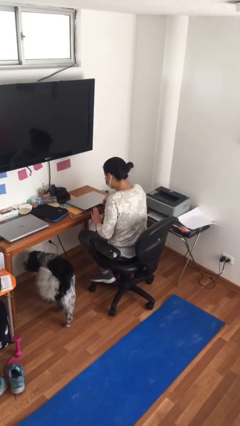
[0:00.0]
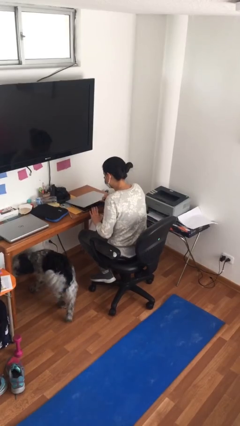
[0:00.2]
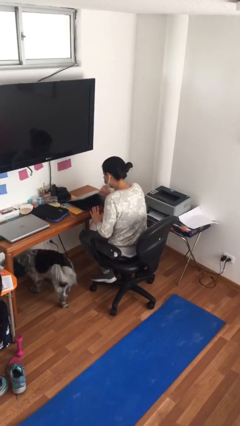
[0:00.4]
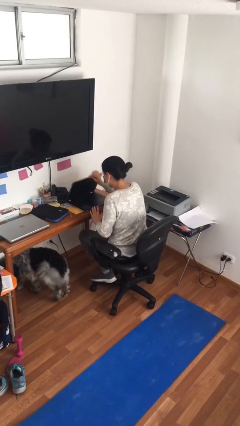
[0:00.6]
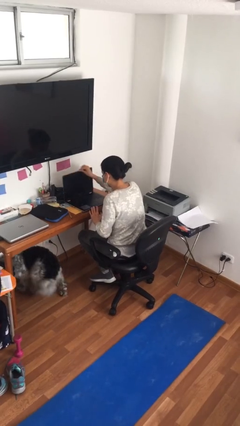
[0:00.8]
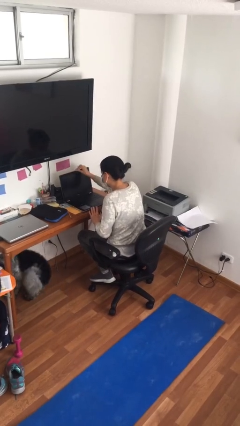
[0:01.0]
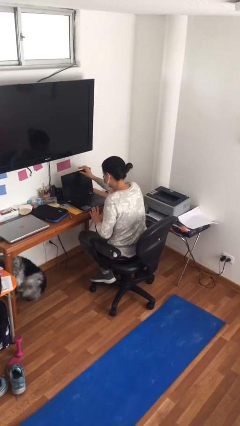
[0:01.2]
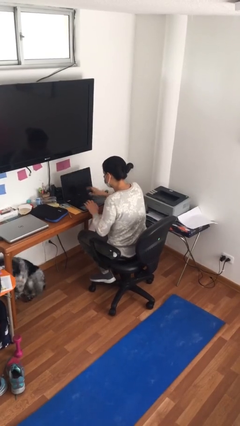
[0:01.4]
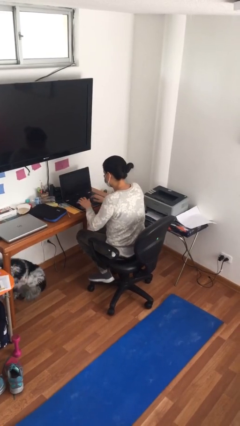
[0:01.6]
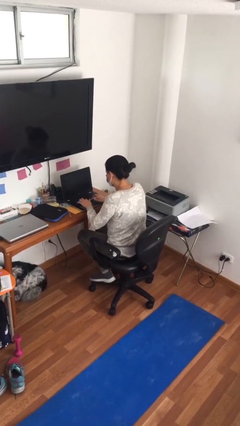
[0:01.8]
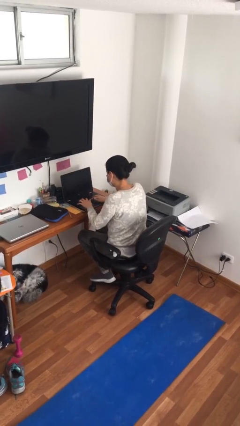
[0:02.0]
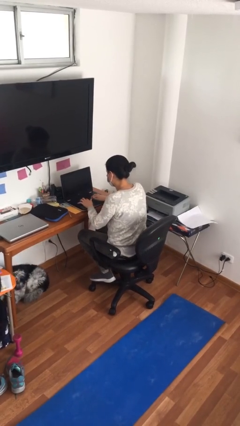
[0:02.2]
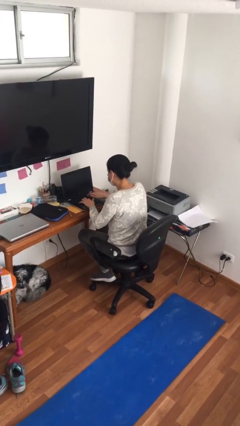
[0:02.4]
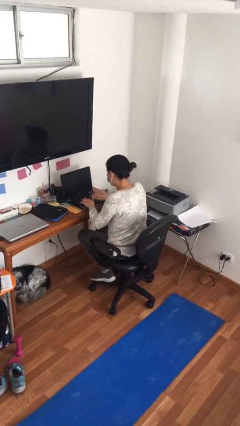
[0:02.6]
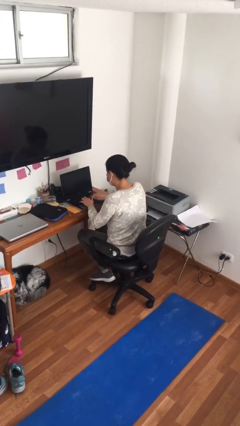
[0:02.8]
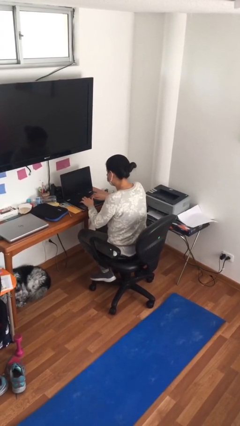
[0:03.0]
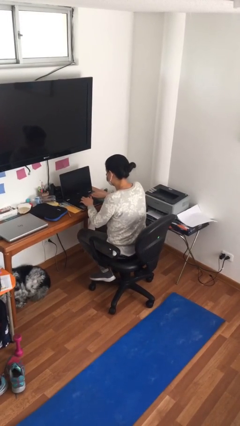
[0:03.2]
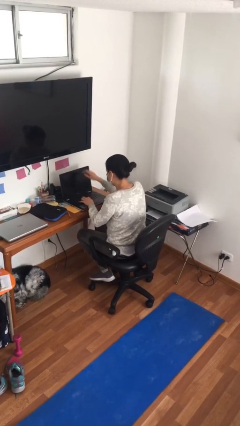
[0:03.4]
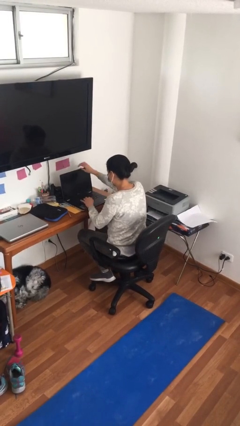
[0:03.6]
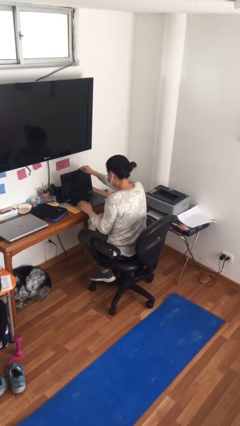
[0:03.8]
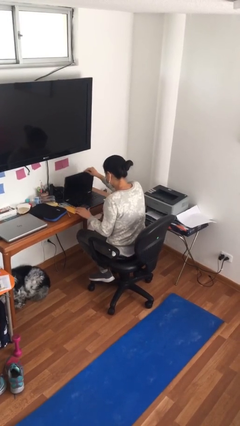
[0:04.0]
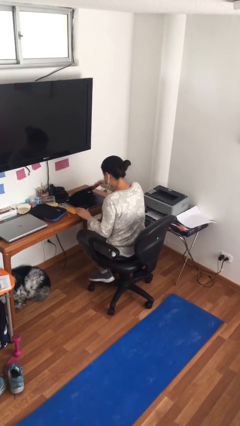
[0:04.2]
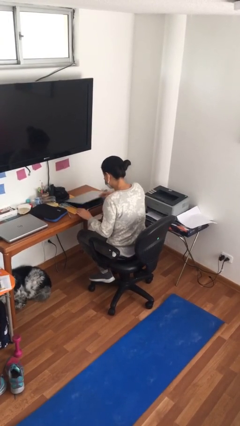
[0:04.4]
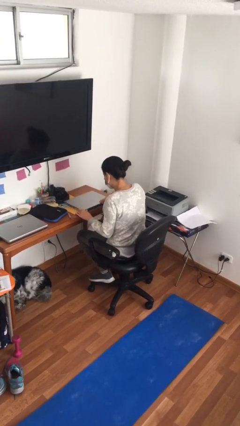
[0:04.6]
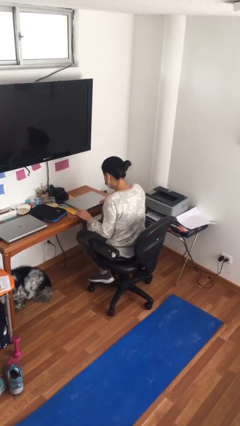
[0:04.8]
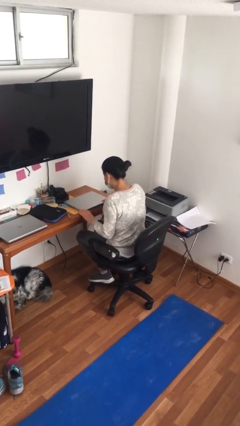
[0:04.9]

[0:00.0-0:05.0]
person interacts with laptop

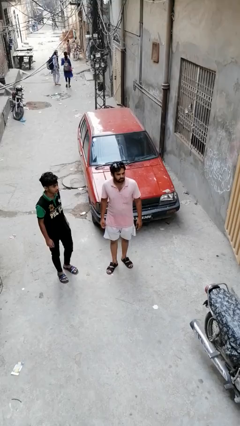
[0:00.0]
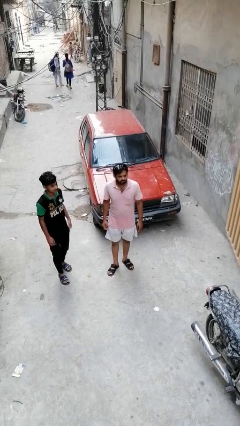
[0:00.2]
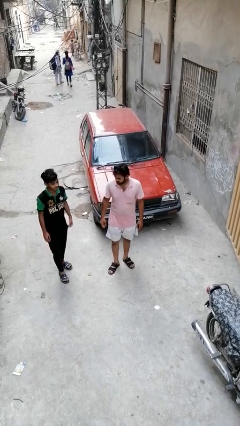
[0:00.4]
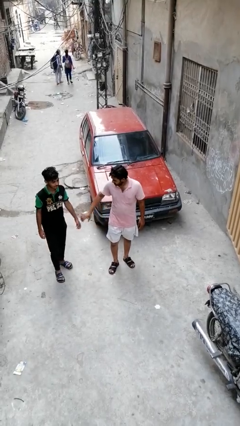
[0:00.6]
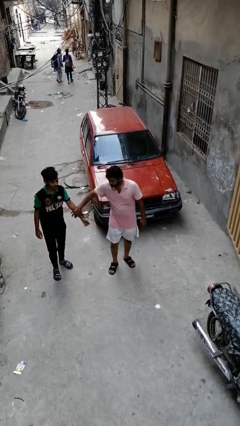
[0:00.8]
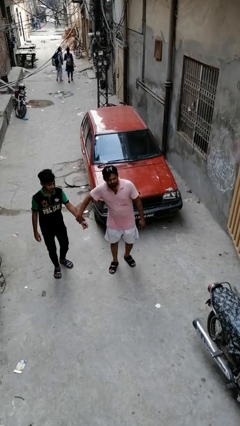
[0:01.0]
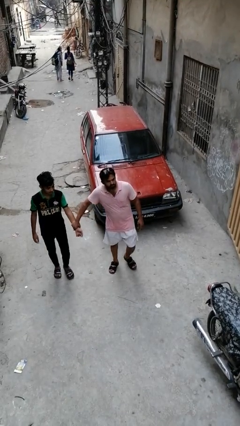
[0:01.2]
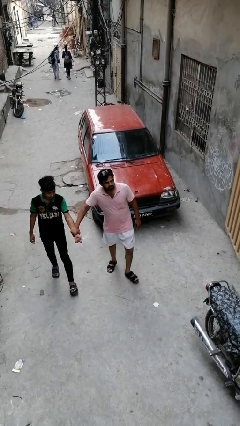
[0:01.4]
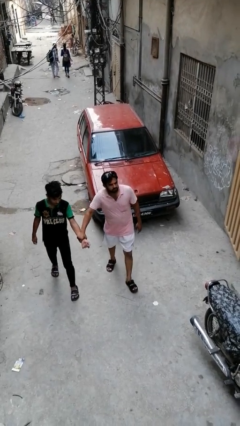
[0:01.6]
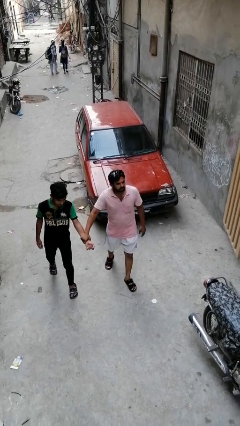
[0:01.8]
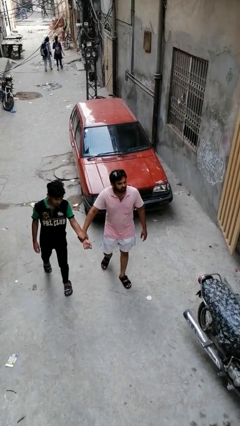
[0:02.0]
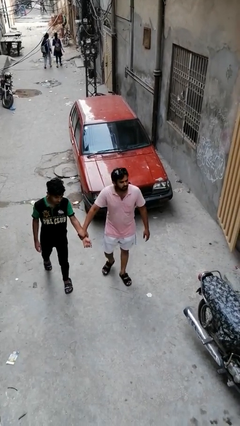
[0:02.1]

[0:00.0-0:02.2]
person grabs person by forearm

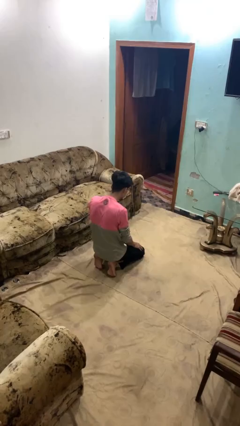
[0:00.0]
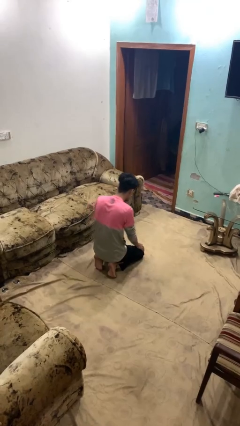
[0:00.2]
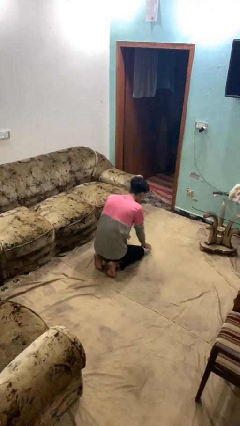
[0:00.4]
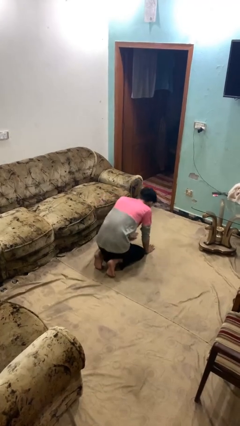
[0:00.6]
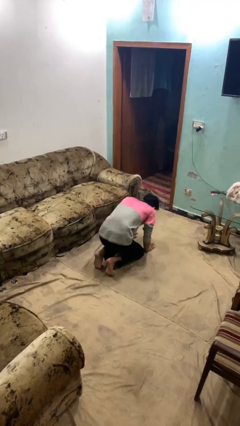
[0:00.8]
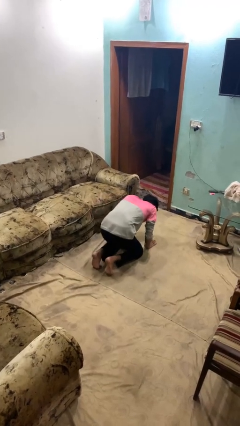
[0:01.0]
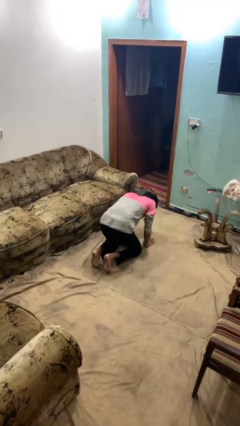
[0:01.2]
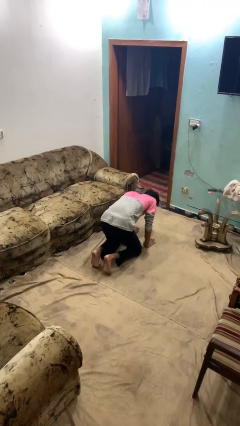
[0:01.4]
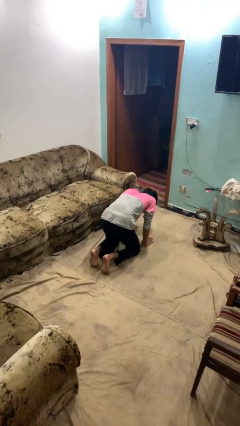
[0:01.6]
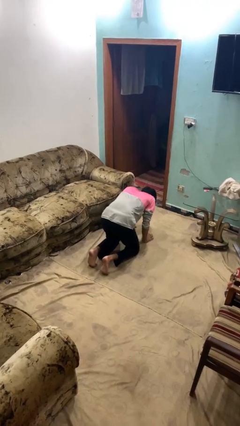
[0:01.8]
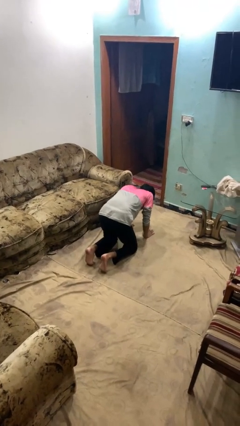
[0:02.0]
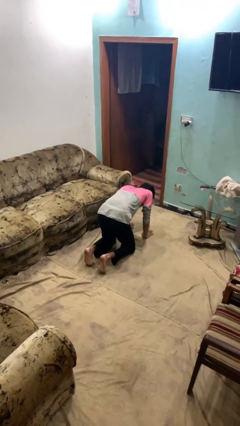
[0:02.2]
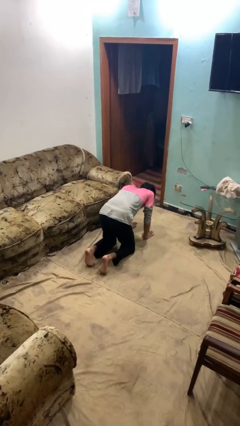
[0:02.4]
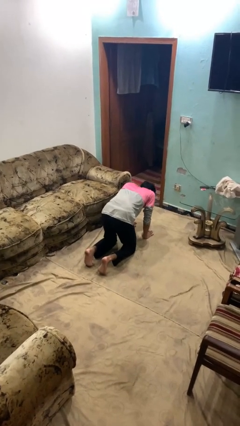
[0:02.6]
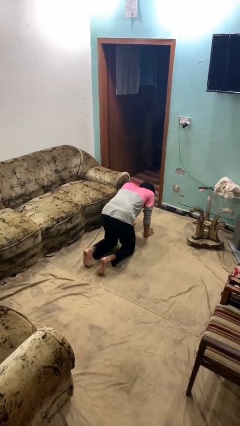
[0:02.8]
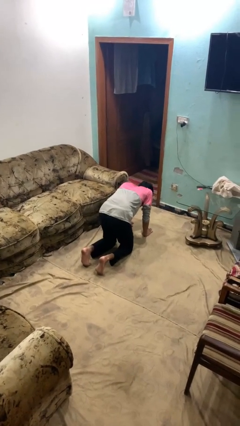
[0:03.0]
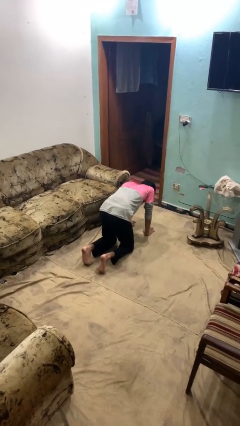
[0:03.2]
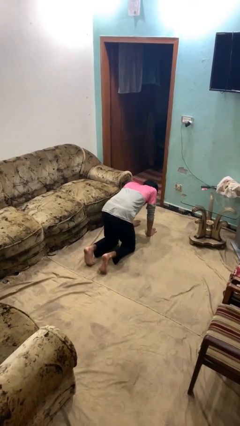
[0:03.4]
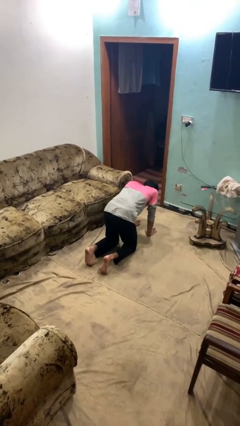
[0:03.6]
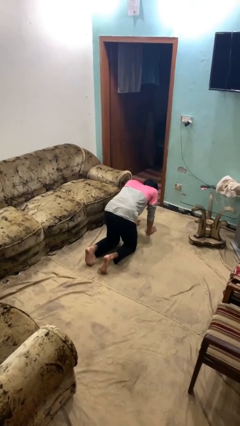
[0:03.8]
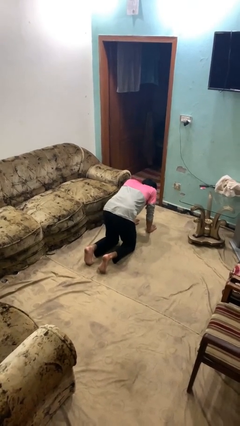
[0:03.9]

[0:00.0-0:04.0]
person crawls

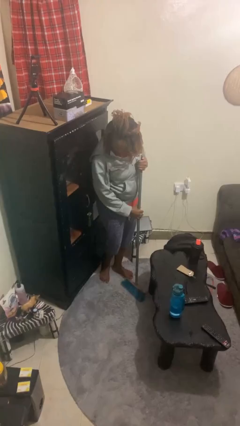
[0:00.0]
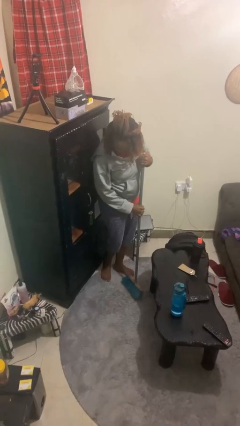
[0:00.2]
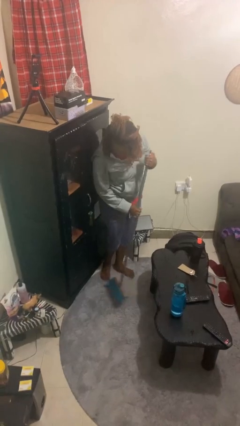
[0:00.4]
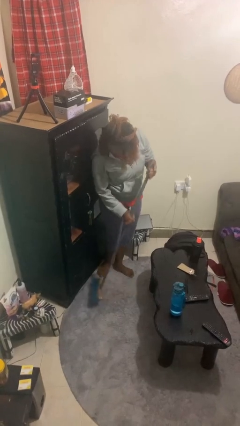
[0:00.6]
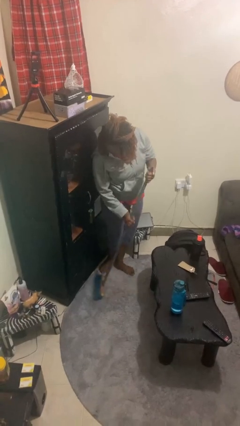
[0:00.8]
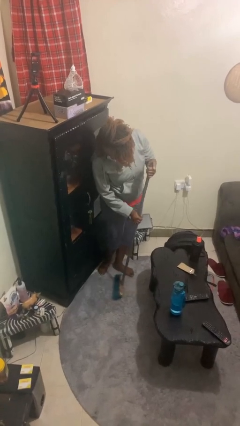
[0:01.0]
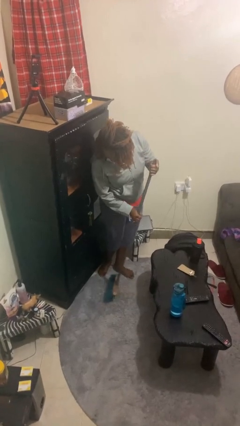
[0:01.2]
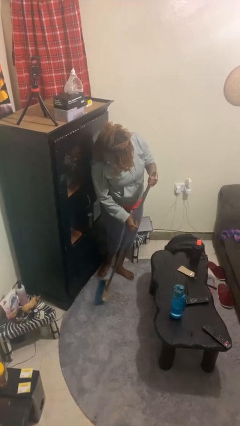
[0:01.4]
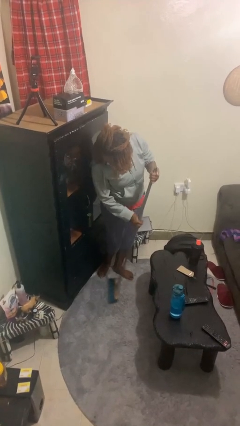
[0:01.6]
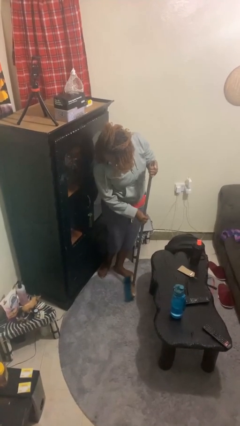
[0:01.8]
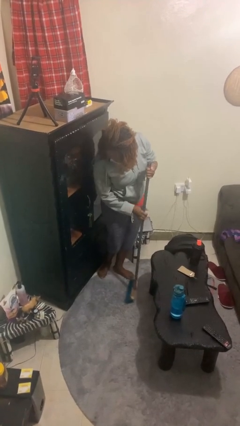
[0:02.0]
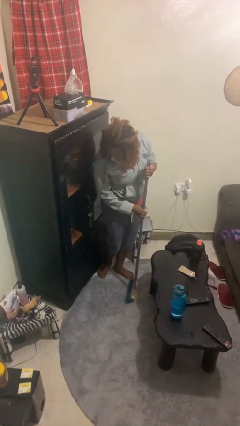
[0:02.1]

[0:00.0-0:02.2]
person sweeps floor

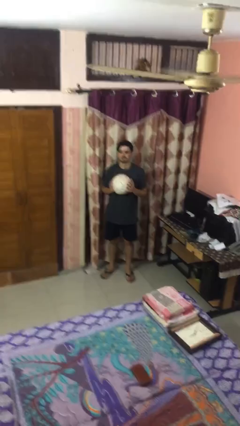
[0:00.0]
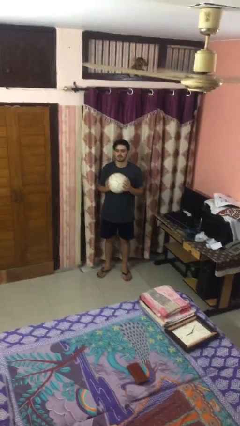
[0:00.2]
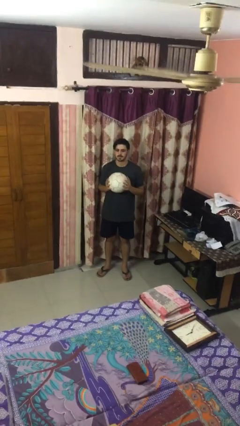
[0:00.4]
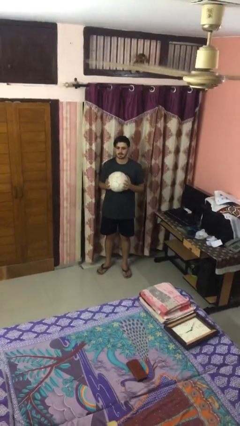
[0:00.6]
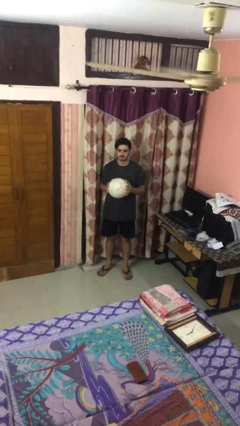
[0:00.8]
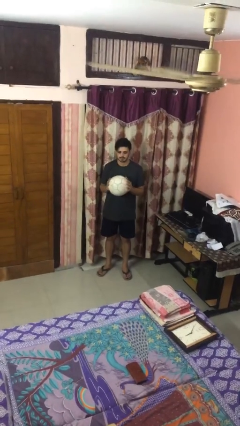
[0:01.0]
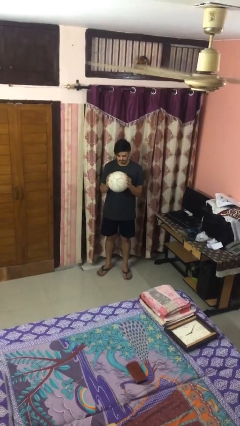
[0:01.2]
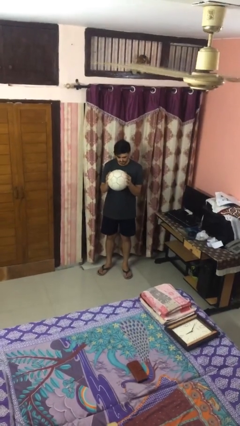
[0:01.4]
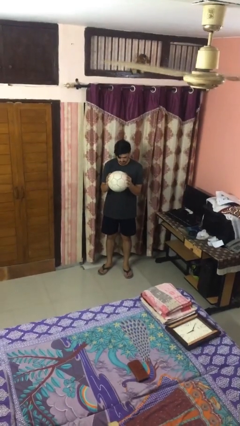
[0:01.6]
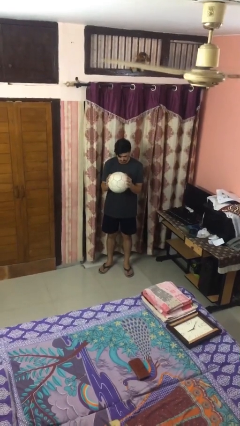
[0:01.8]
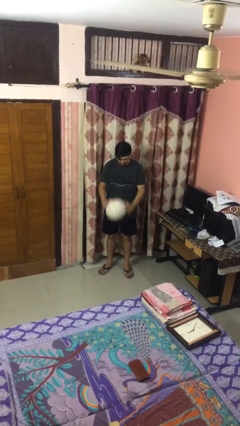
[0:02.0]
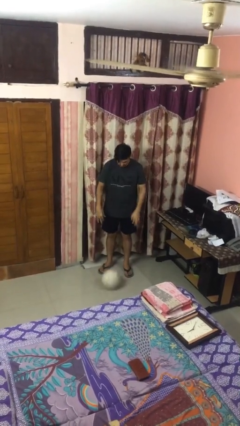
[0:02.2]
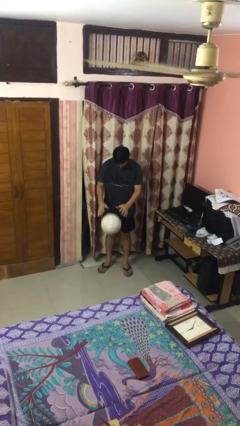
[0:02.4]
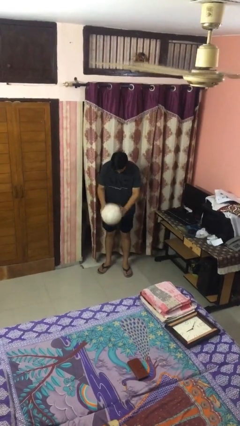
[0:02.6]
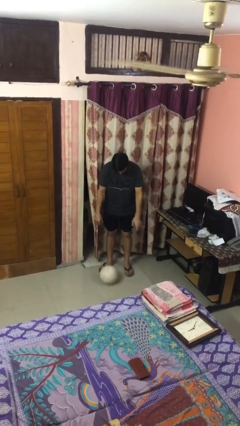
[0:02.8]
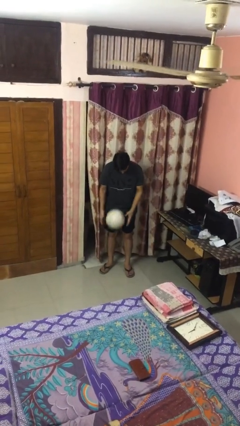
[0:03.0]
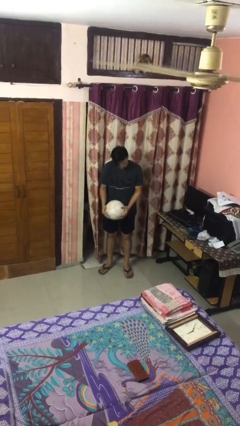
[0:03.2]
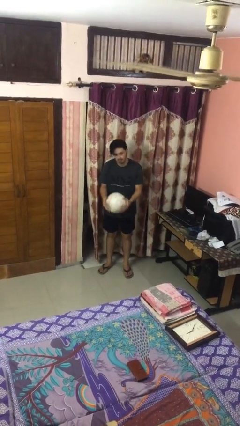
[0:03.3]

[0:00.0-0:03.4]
person bounces ball on floor

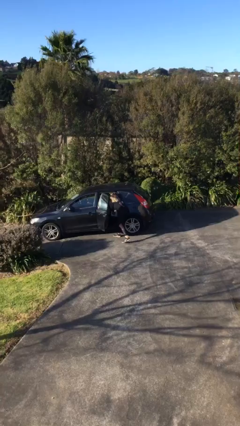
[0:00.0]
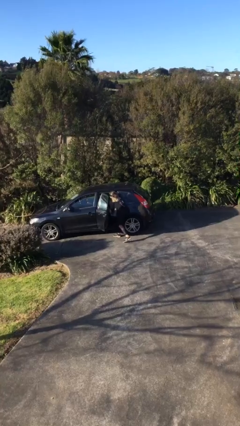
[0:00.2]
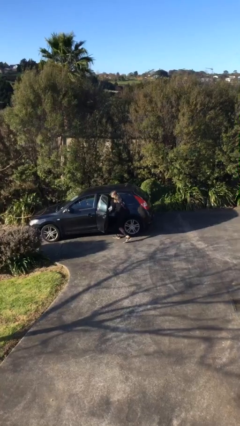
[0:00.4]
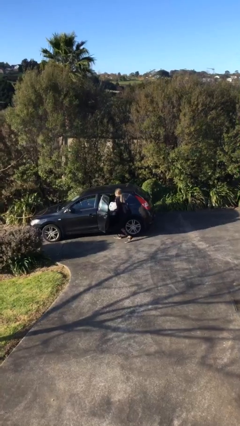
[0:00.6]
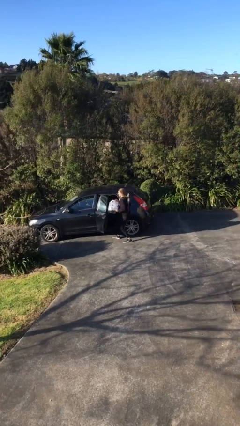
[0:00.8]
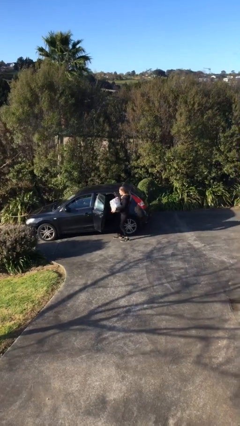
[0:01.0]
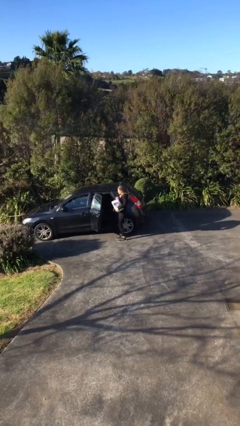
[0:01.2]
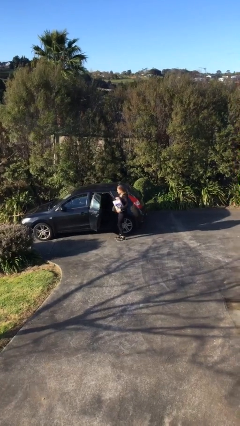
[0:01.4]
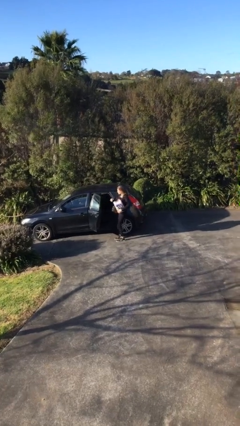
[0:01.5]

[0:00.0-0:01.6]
person unloads car
